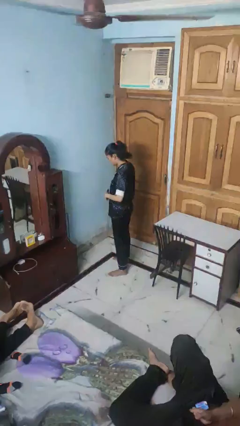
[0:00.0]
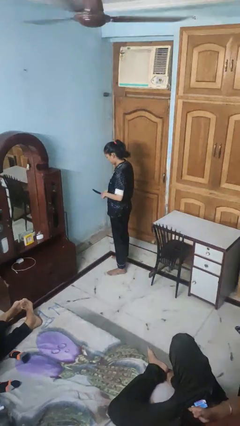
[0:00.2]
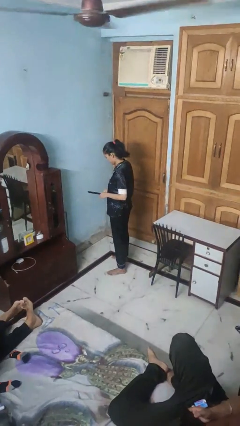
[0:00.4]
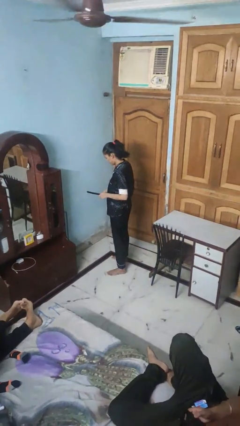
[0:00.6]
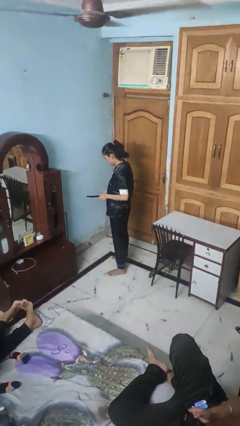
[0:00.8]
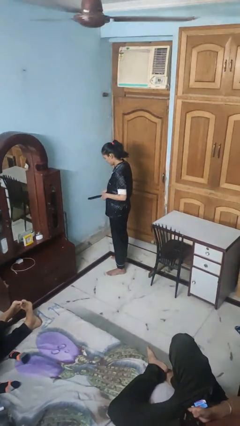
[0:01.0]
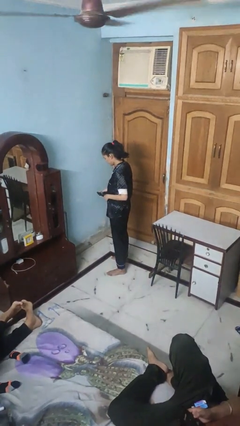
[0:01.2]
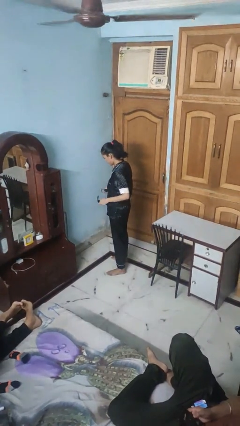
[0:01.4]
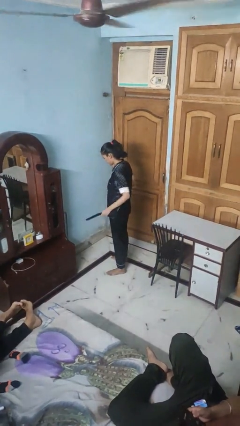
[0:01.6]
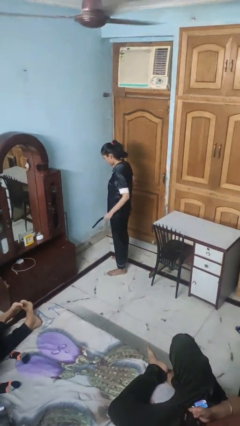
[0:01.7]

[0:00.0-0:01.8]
person takes off belt

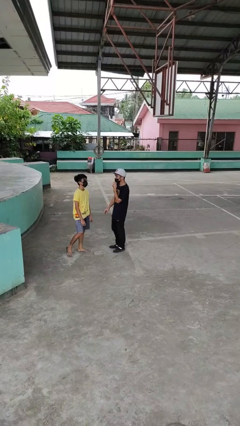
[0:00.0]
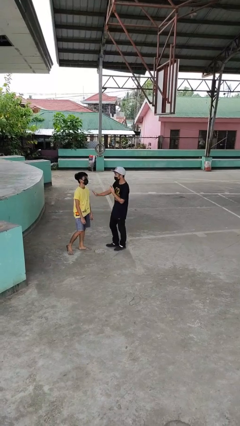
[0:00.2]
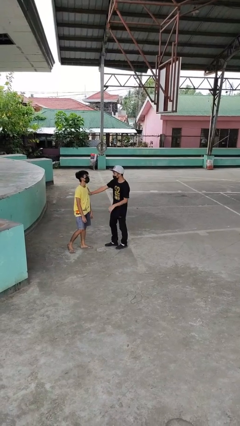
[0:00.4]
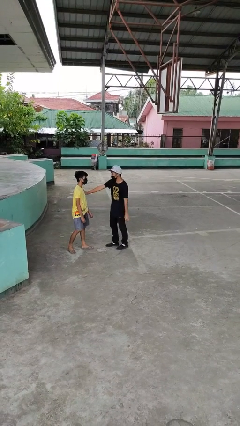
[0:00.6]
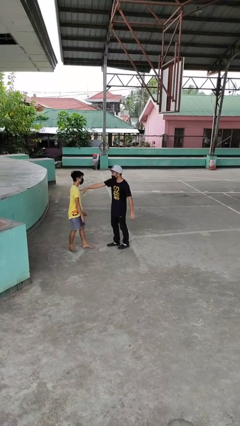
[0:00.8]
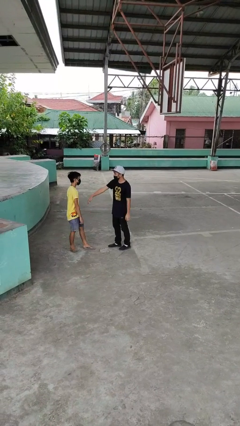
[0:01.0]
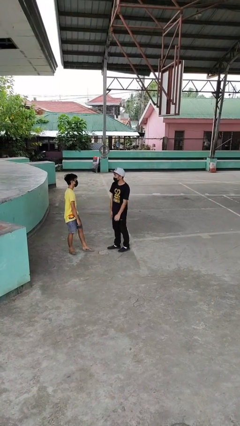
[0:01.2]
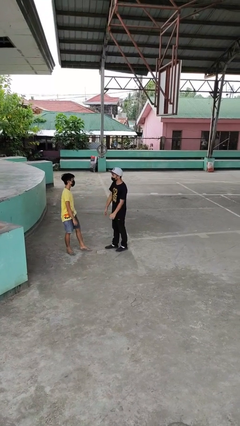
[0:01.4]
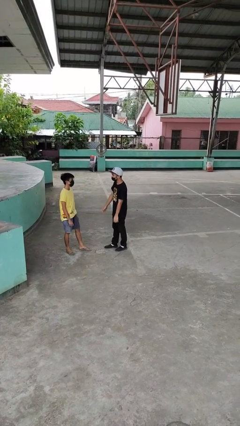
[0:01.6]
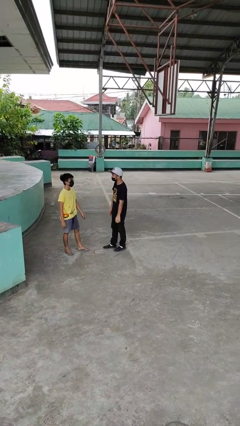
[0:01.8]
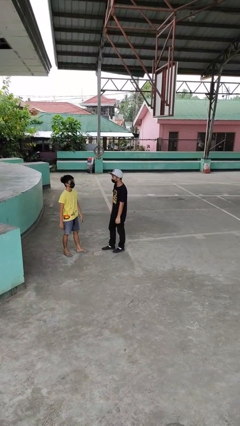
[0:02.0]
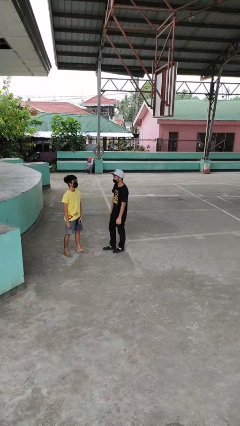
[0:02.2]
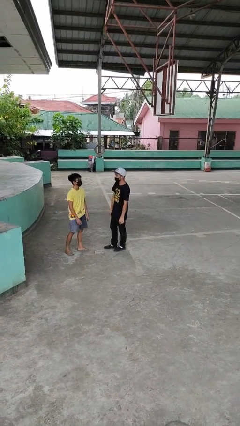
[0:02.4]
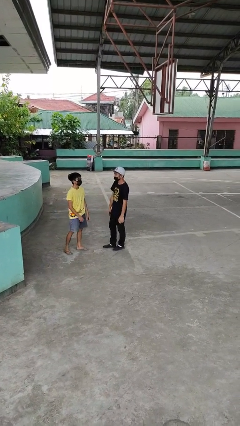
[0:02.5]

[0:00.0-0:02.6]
person shoves person

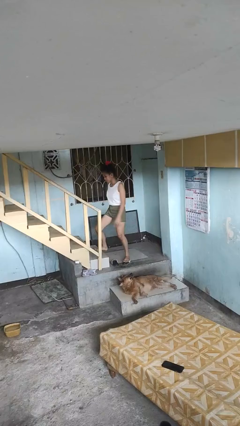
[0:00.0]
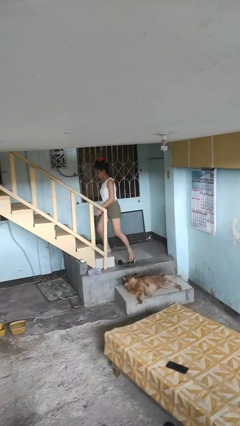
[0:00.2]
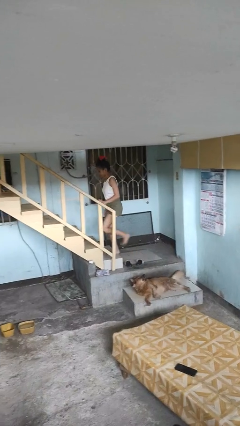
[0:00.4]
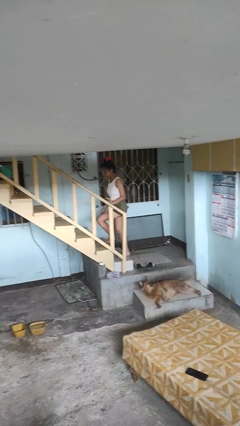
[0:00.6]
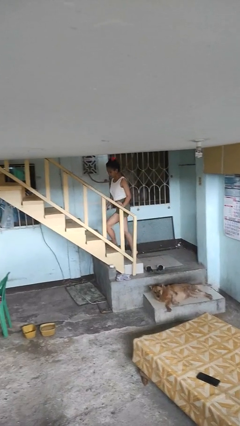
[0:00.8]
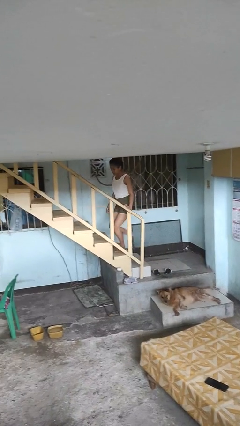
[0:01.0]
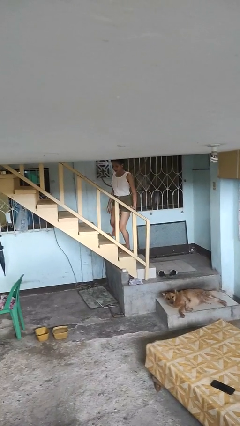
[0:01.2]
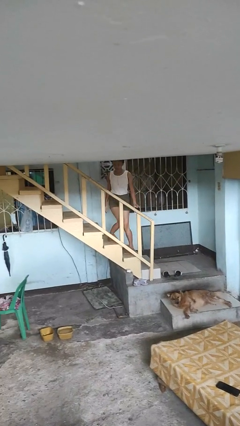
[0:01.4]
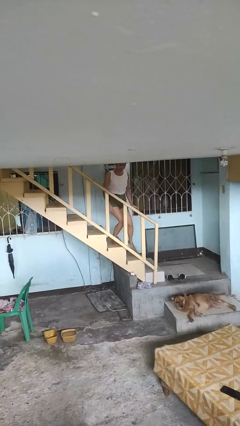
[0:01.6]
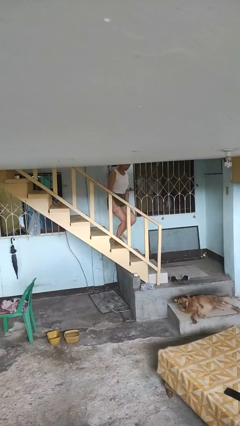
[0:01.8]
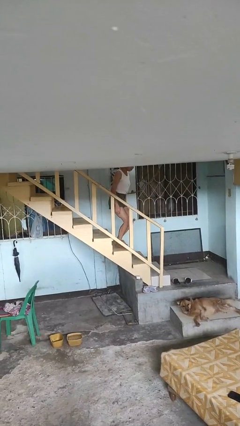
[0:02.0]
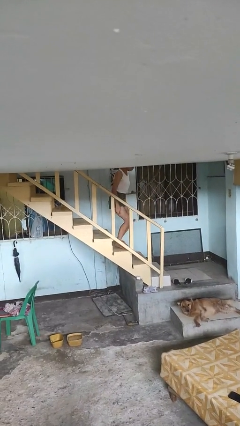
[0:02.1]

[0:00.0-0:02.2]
person climbs up stairs

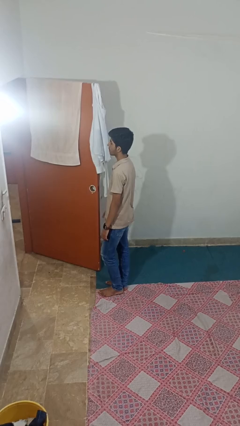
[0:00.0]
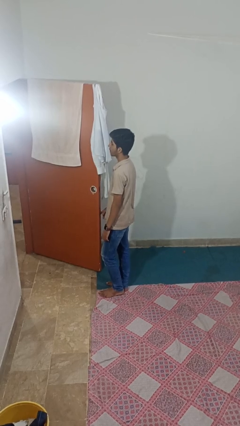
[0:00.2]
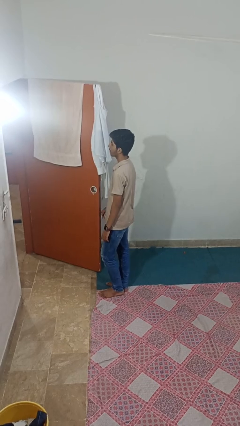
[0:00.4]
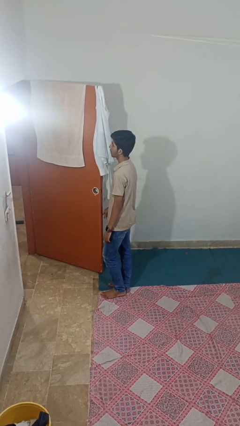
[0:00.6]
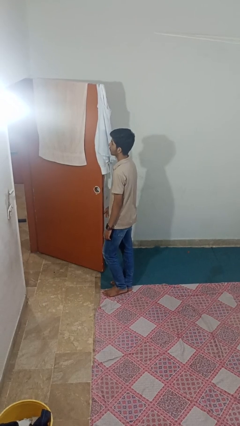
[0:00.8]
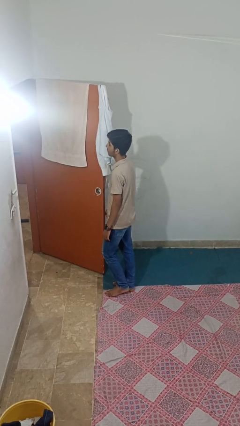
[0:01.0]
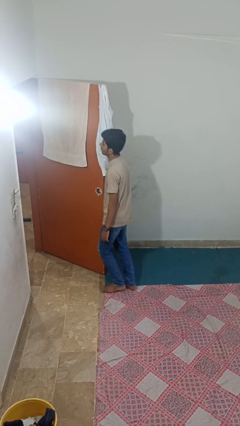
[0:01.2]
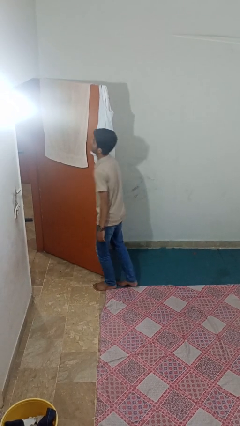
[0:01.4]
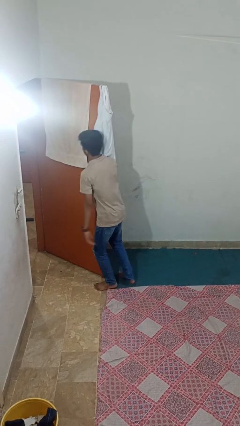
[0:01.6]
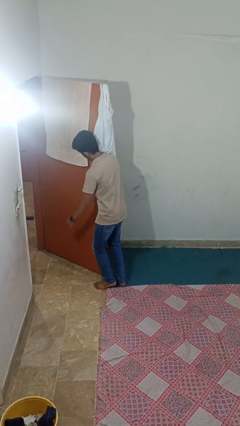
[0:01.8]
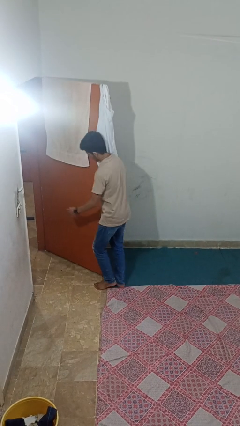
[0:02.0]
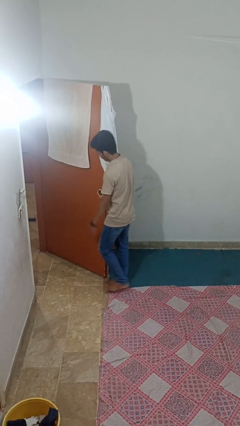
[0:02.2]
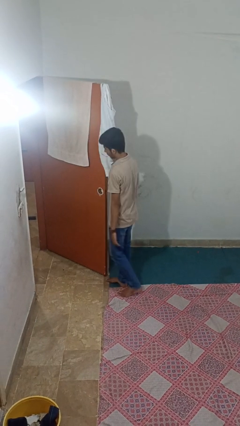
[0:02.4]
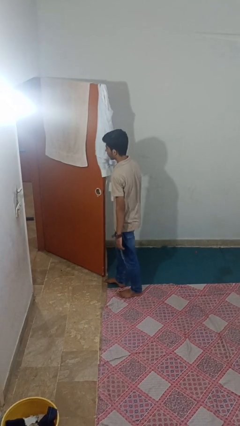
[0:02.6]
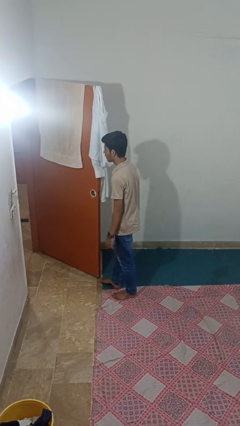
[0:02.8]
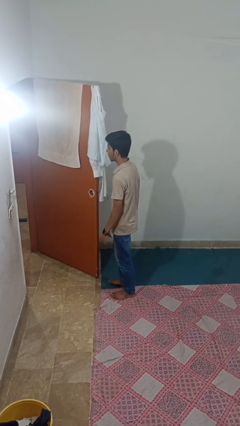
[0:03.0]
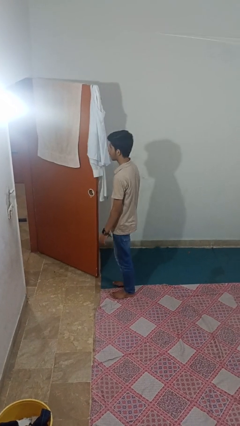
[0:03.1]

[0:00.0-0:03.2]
person bumps into wall

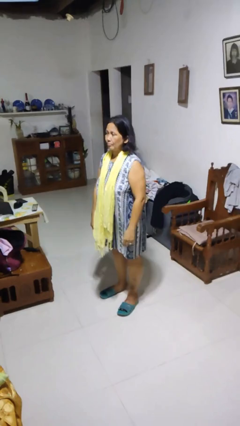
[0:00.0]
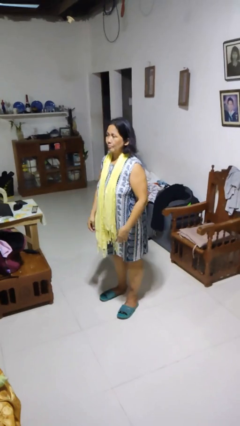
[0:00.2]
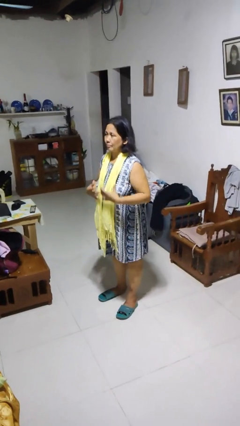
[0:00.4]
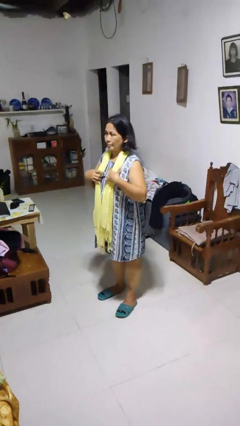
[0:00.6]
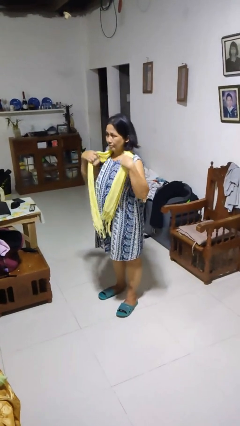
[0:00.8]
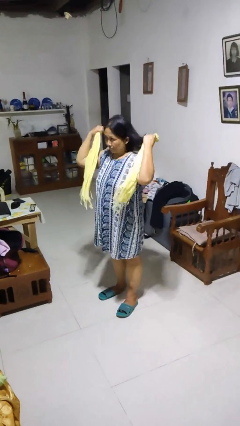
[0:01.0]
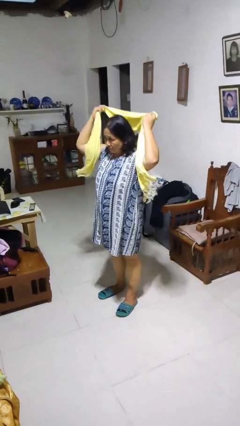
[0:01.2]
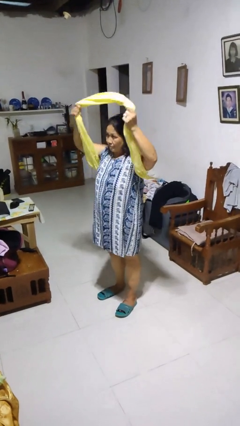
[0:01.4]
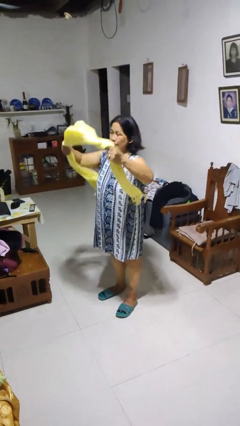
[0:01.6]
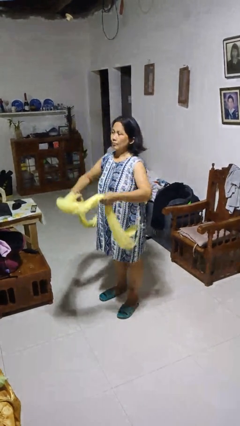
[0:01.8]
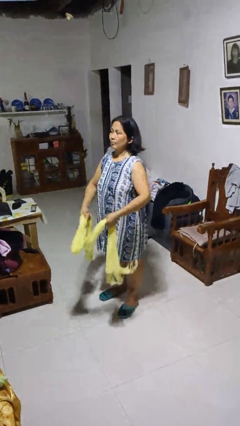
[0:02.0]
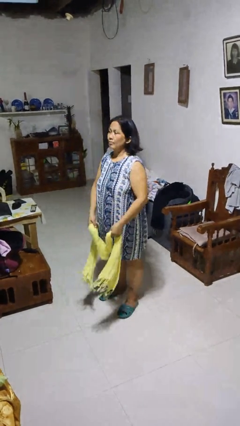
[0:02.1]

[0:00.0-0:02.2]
person takes off scarf

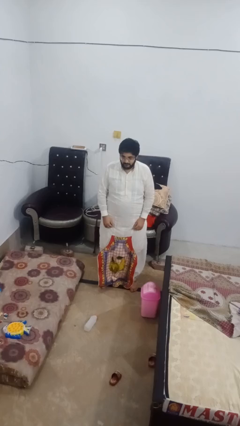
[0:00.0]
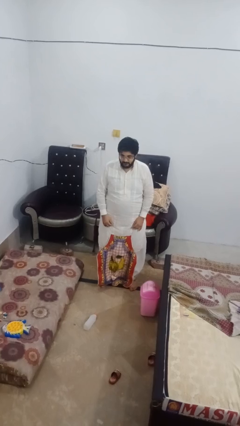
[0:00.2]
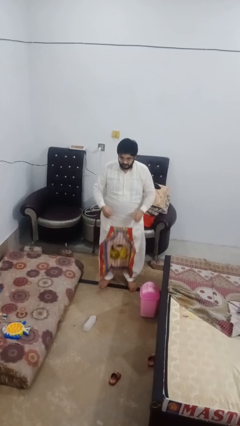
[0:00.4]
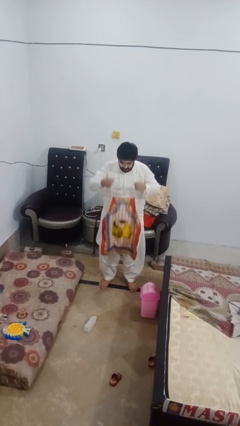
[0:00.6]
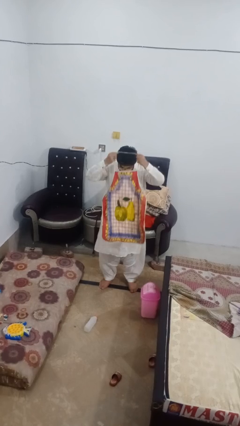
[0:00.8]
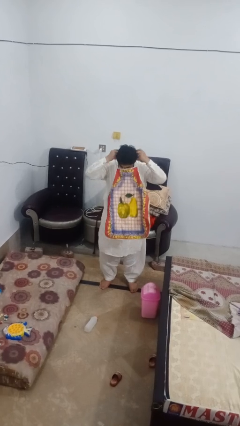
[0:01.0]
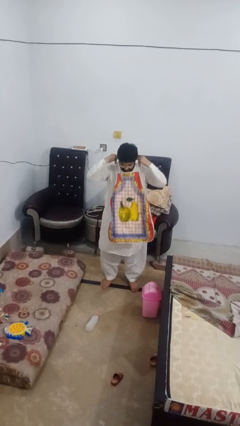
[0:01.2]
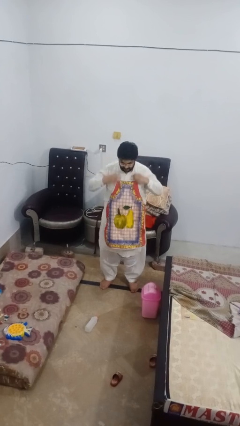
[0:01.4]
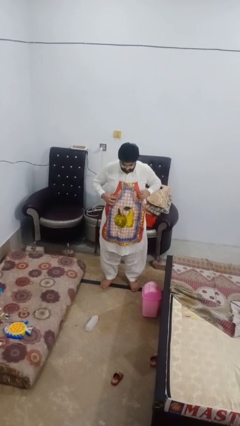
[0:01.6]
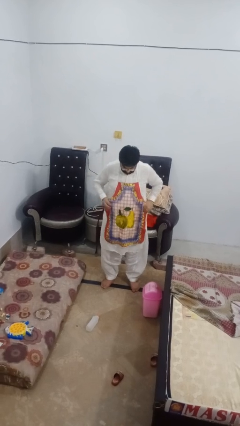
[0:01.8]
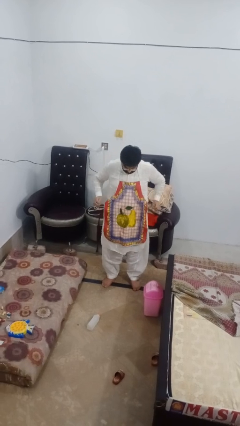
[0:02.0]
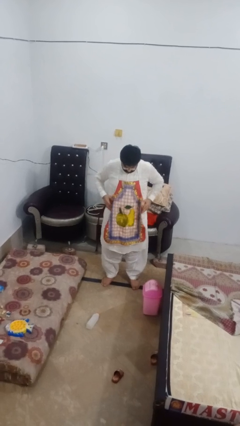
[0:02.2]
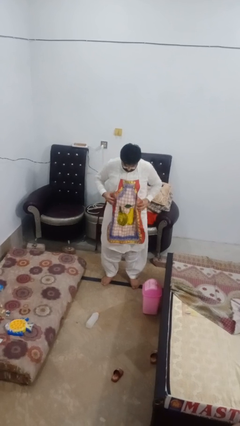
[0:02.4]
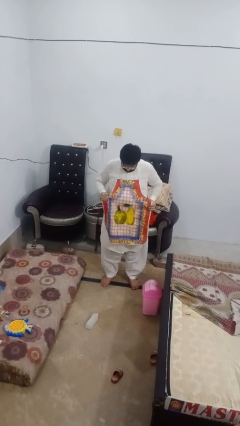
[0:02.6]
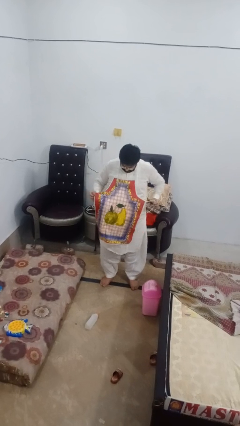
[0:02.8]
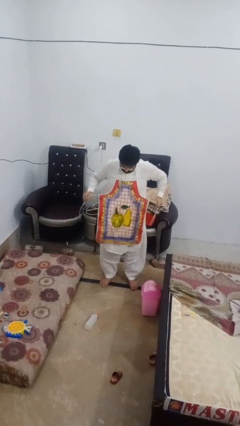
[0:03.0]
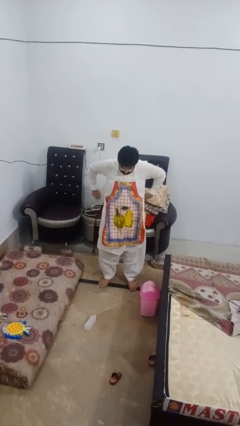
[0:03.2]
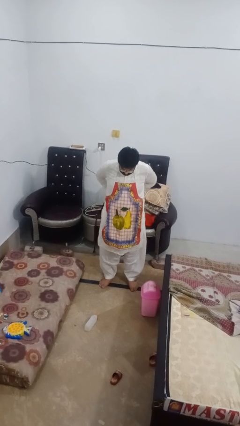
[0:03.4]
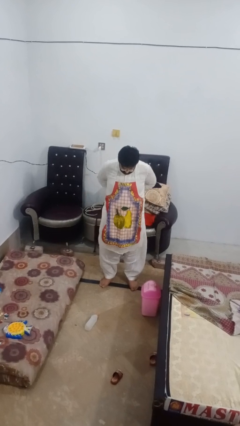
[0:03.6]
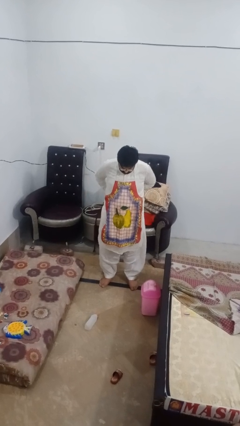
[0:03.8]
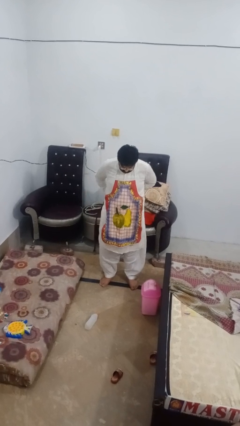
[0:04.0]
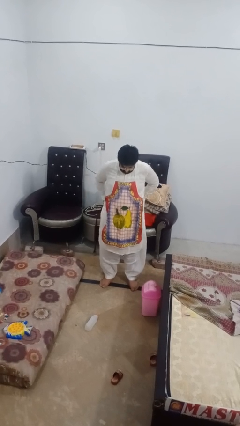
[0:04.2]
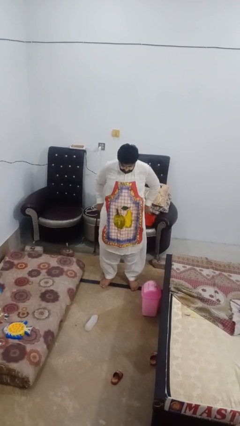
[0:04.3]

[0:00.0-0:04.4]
person puts on apron

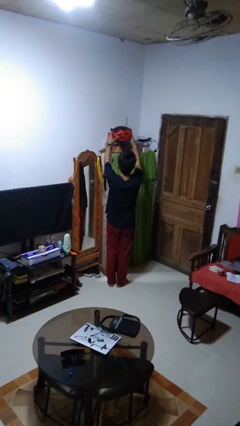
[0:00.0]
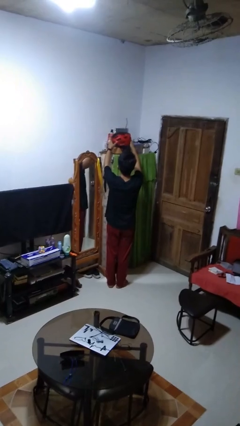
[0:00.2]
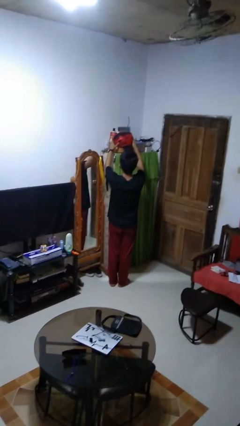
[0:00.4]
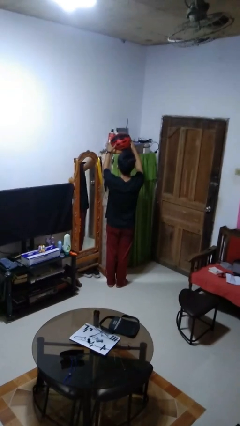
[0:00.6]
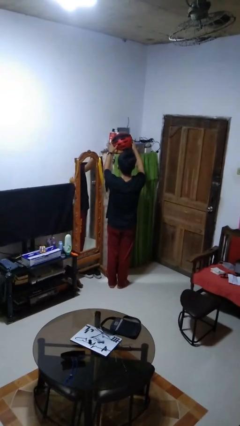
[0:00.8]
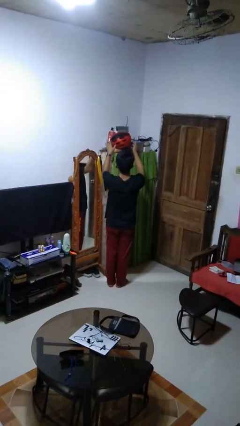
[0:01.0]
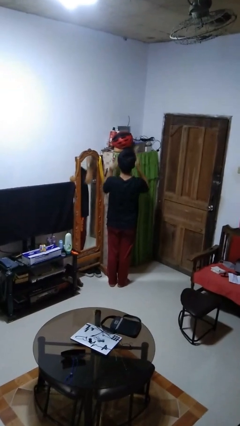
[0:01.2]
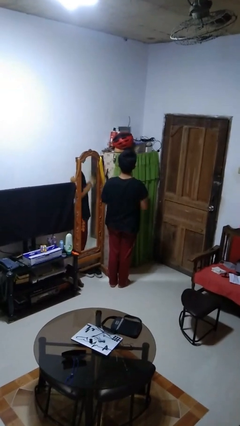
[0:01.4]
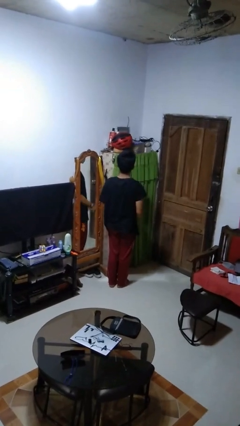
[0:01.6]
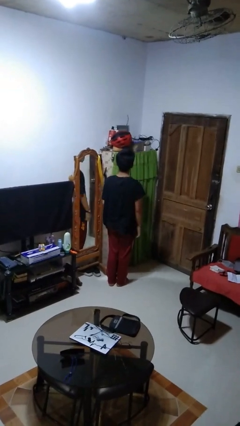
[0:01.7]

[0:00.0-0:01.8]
person puts down object on shelf
